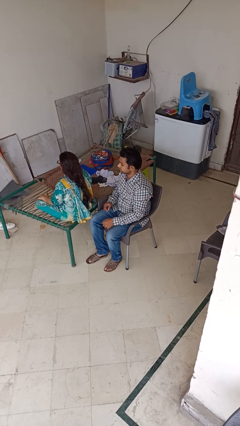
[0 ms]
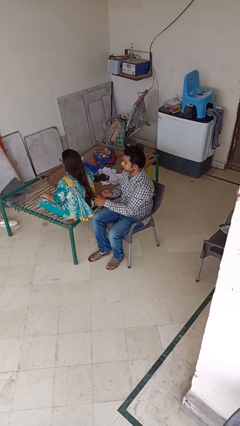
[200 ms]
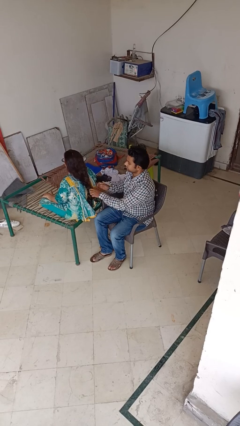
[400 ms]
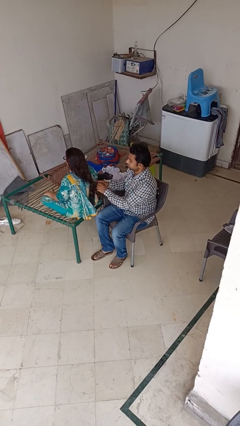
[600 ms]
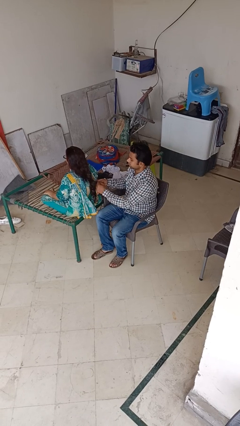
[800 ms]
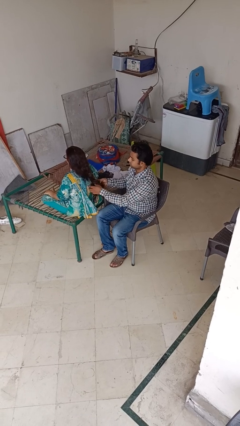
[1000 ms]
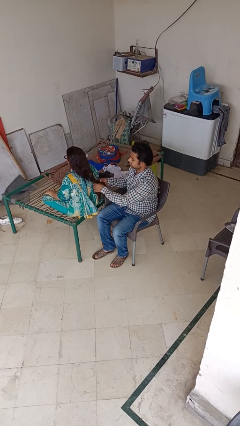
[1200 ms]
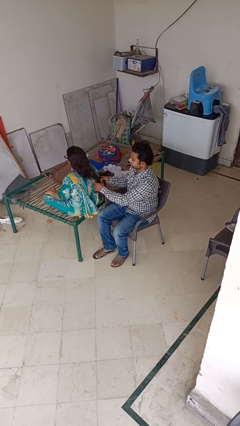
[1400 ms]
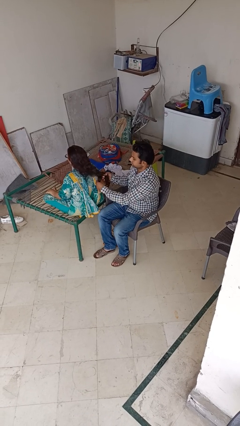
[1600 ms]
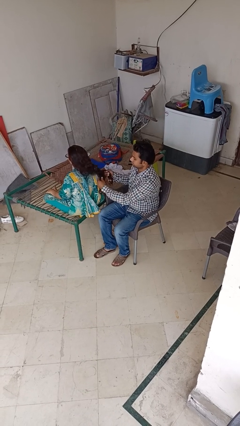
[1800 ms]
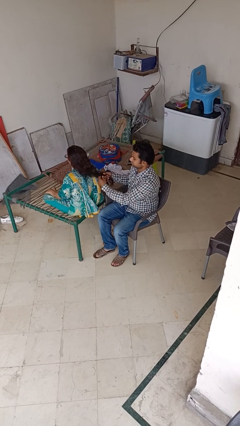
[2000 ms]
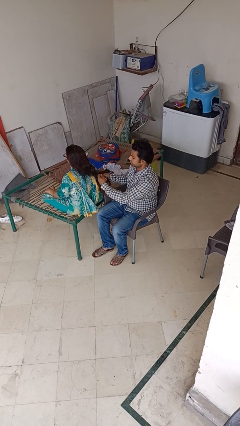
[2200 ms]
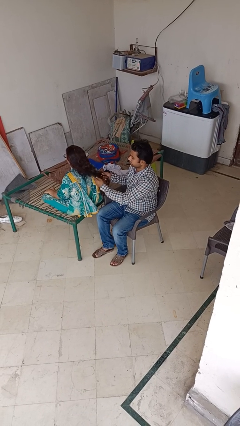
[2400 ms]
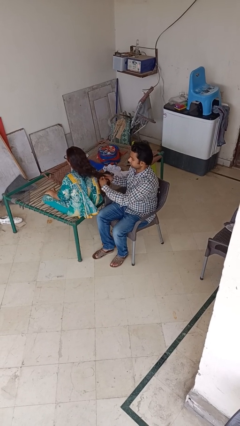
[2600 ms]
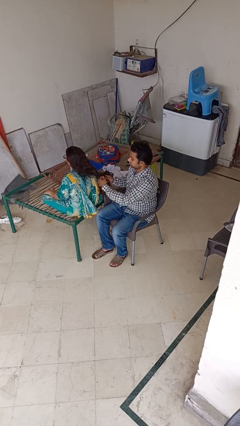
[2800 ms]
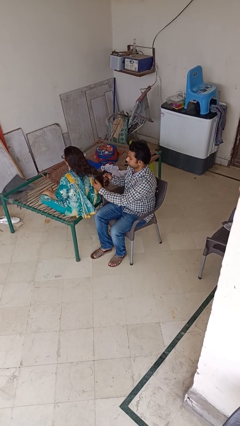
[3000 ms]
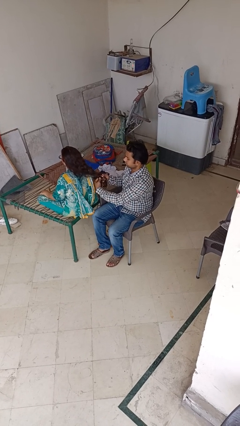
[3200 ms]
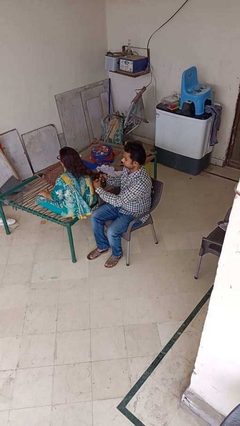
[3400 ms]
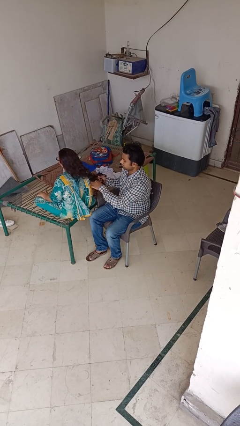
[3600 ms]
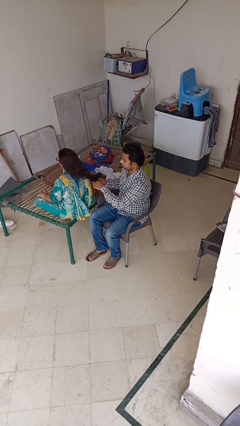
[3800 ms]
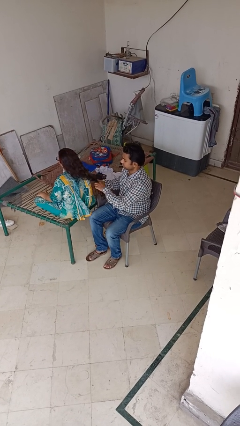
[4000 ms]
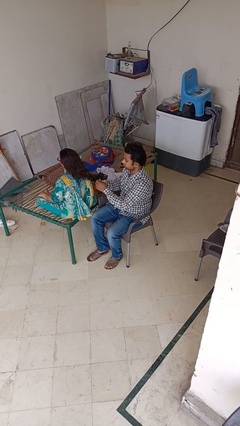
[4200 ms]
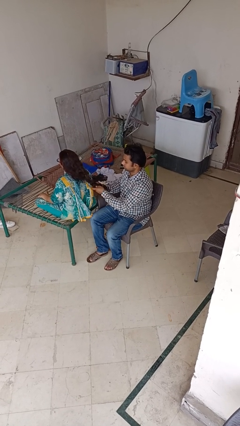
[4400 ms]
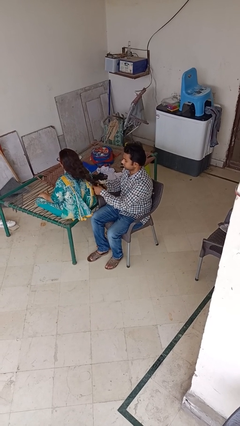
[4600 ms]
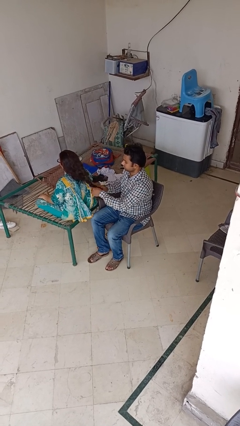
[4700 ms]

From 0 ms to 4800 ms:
person braids hair of person

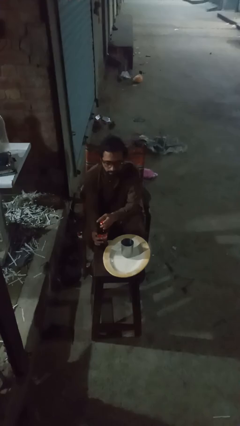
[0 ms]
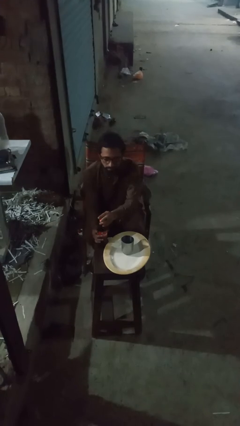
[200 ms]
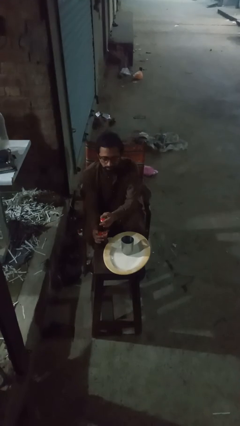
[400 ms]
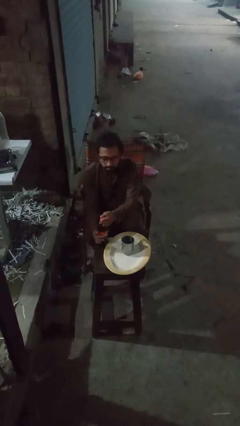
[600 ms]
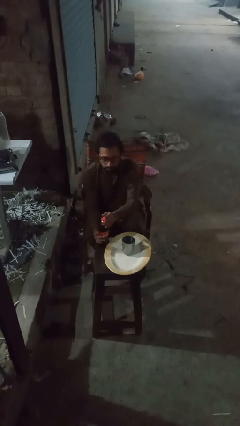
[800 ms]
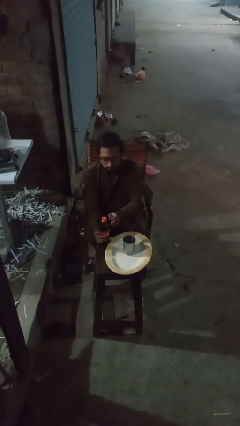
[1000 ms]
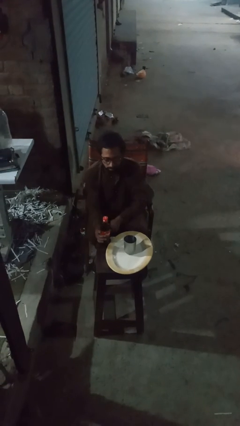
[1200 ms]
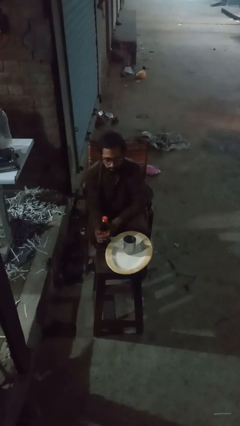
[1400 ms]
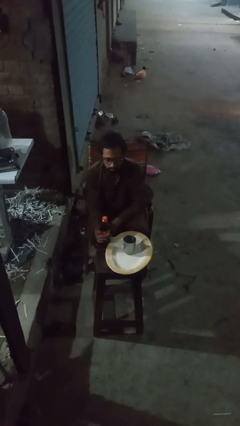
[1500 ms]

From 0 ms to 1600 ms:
person screws lid to bottle

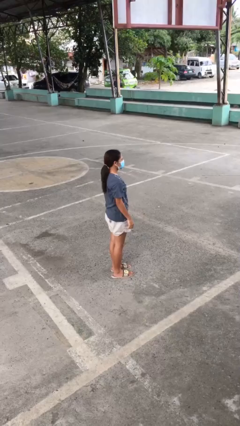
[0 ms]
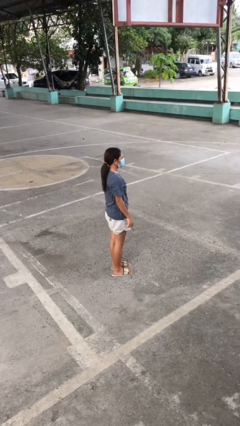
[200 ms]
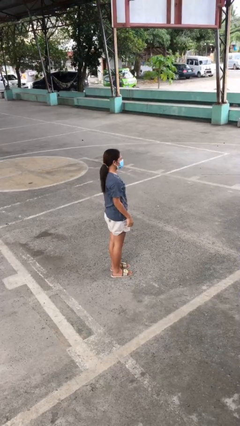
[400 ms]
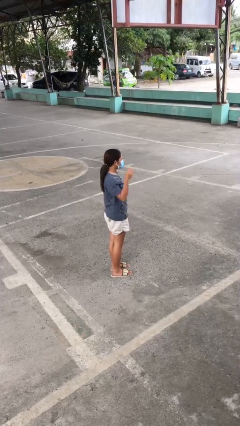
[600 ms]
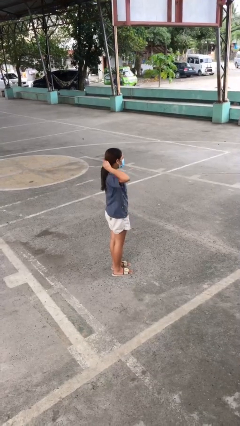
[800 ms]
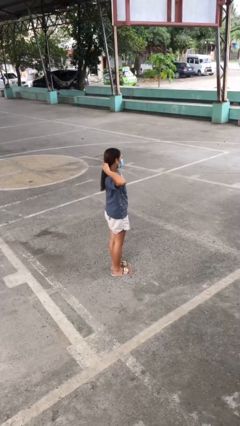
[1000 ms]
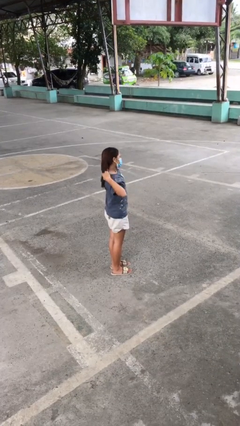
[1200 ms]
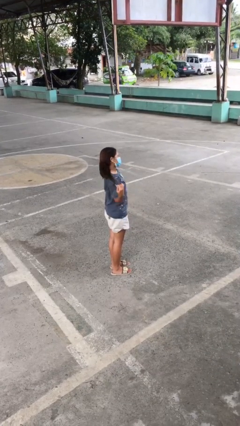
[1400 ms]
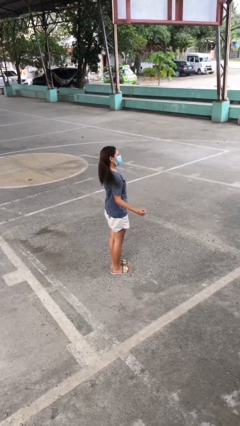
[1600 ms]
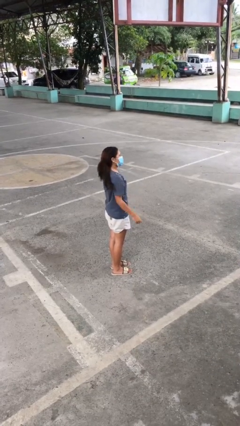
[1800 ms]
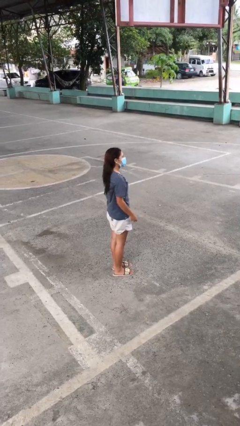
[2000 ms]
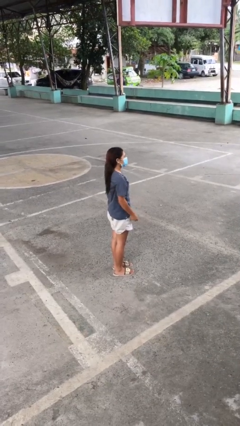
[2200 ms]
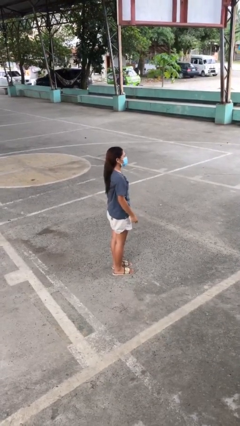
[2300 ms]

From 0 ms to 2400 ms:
person takes off hairtie

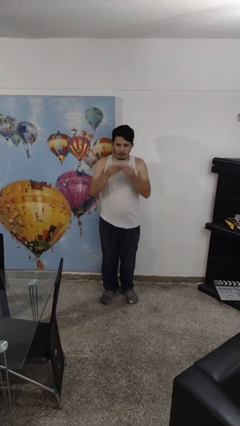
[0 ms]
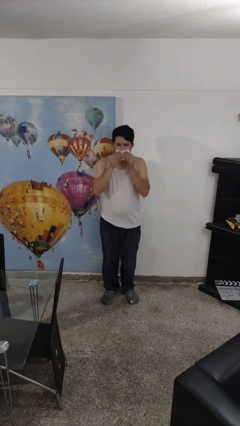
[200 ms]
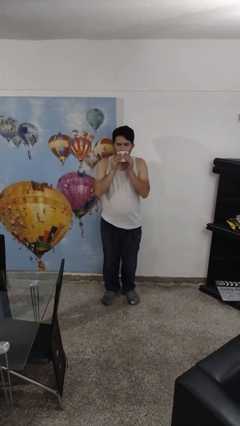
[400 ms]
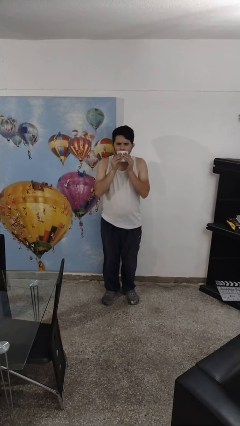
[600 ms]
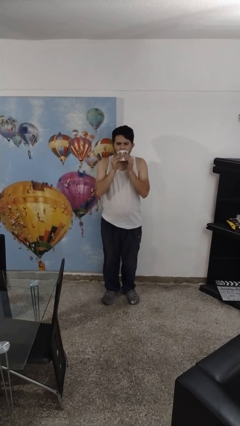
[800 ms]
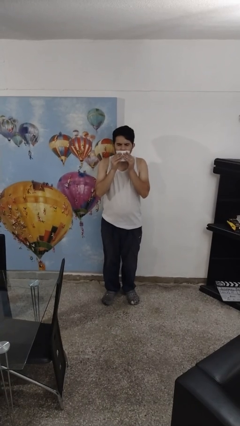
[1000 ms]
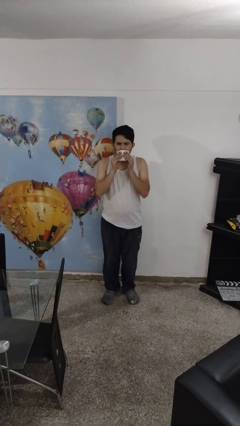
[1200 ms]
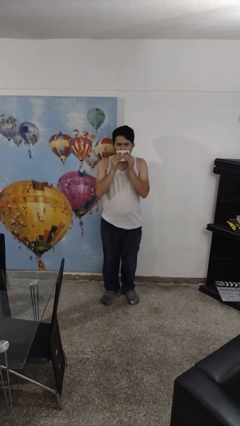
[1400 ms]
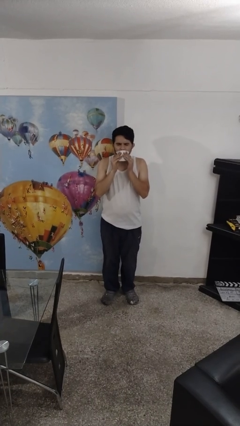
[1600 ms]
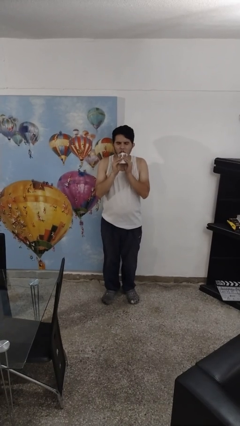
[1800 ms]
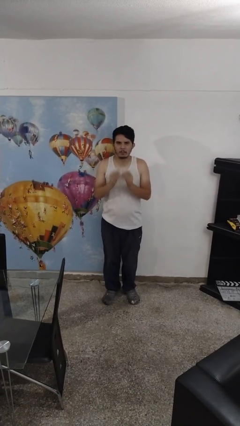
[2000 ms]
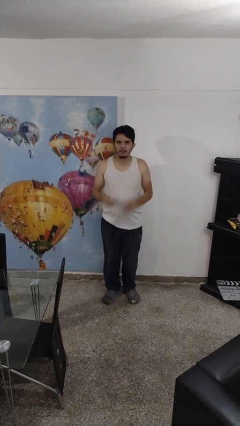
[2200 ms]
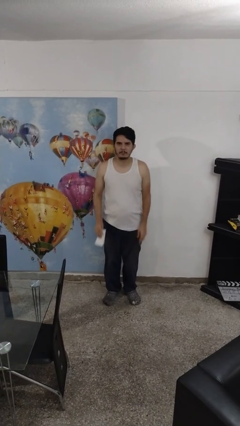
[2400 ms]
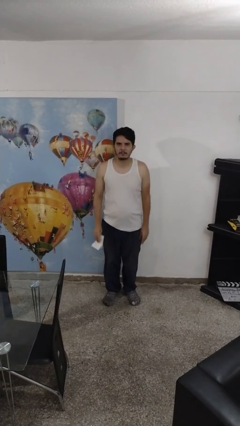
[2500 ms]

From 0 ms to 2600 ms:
person wipes mouth with napkin

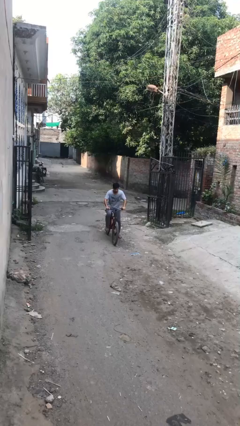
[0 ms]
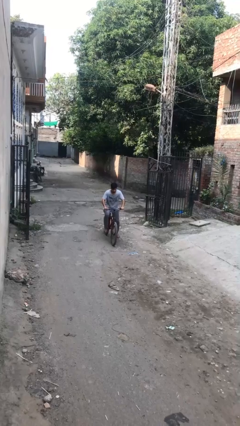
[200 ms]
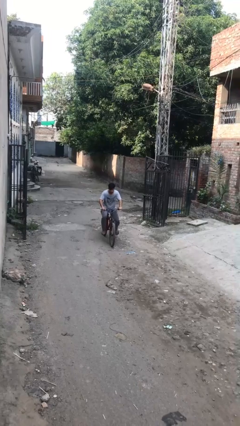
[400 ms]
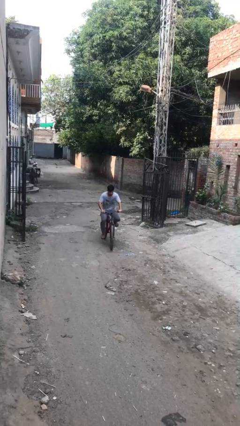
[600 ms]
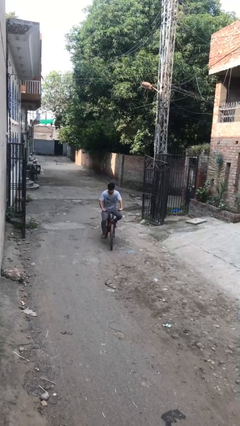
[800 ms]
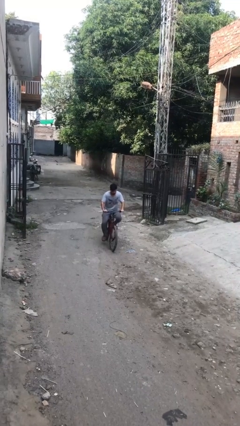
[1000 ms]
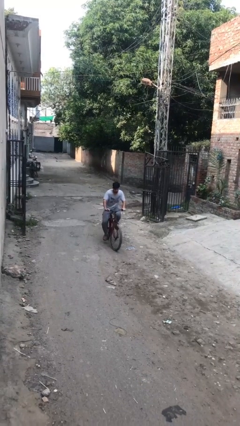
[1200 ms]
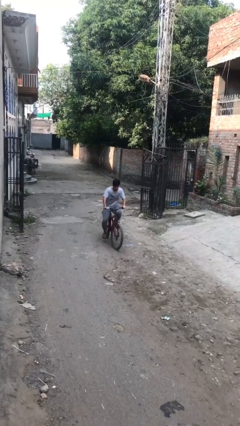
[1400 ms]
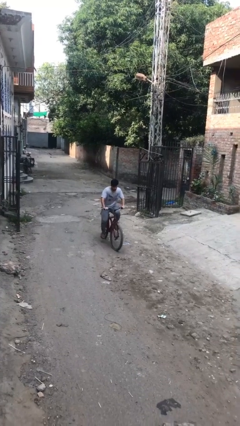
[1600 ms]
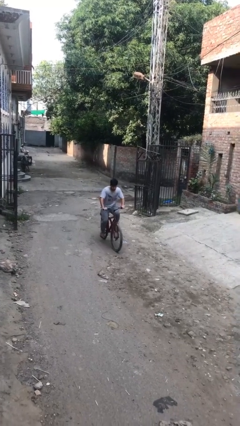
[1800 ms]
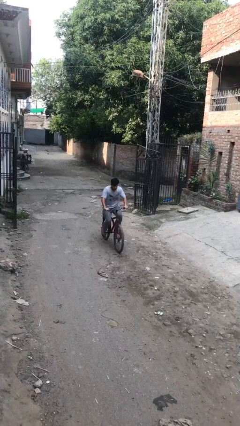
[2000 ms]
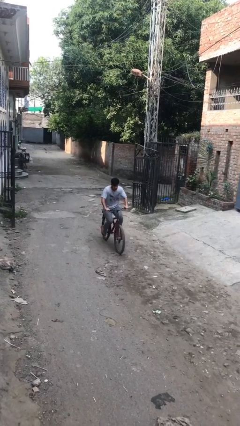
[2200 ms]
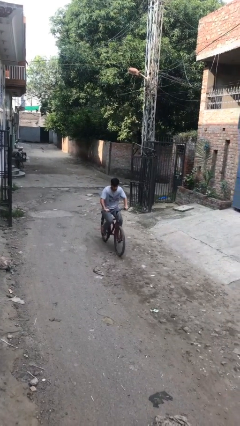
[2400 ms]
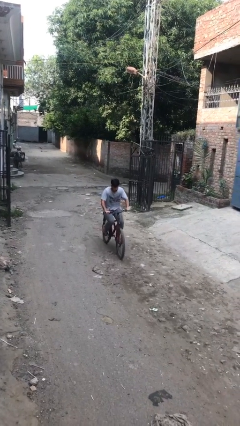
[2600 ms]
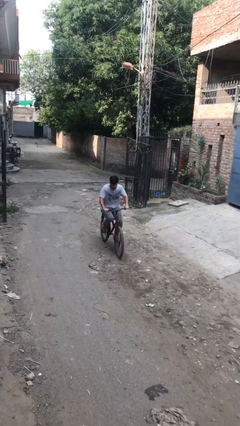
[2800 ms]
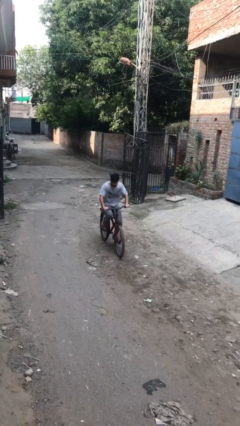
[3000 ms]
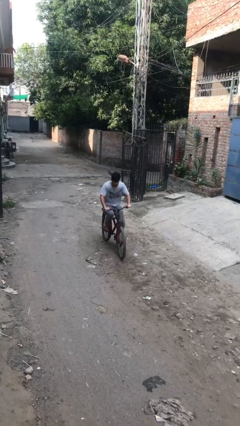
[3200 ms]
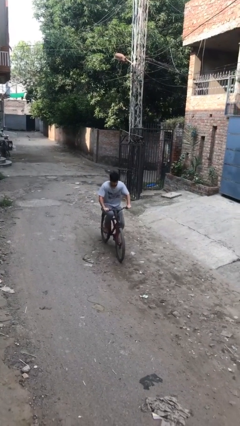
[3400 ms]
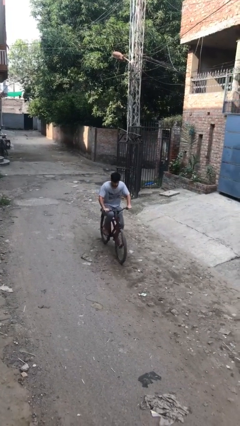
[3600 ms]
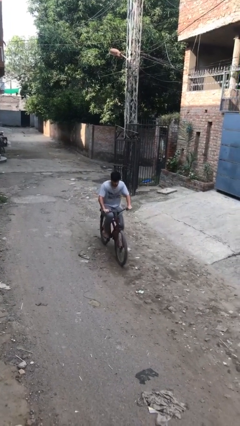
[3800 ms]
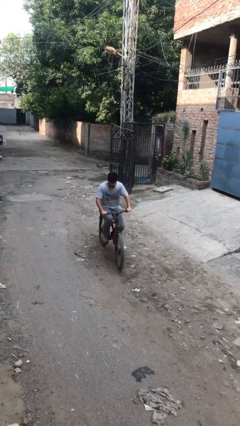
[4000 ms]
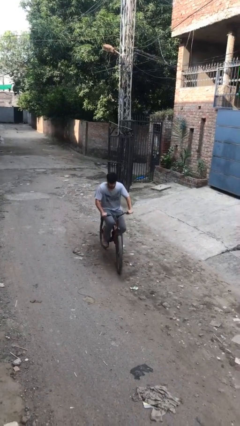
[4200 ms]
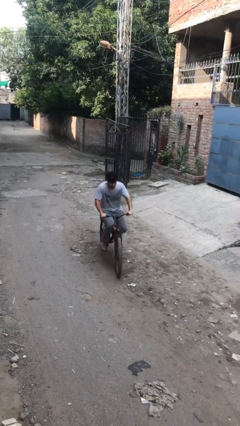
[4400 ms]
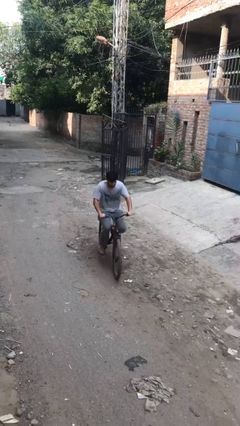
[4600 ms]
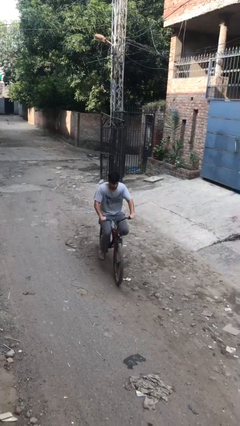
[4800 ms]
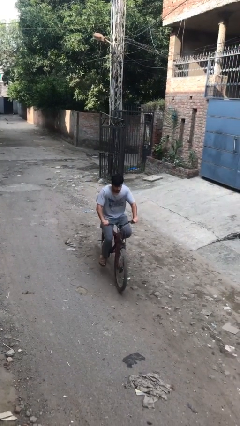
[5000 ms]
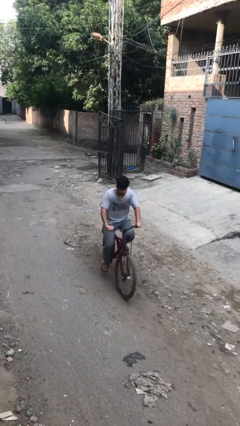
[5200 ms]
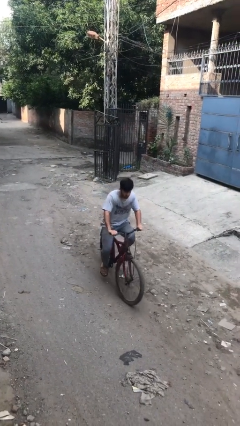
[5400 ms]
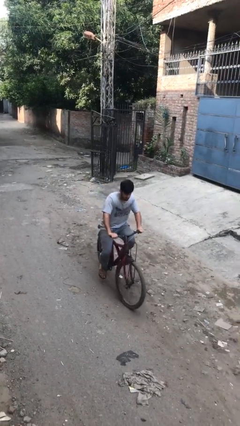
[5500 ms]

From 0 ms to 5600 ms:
person rides bicycle

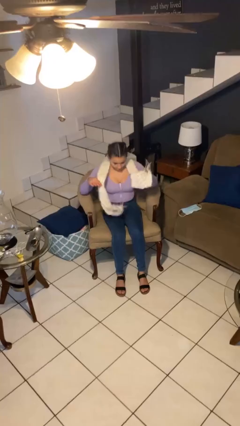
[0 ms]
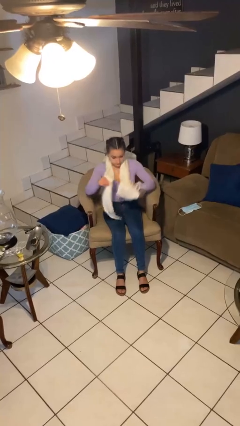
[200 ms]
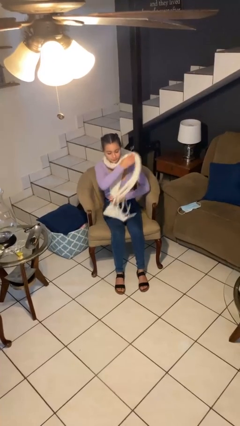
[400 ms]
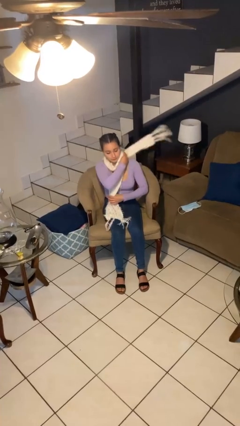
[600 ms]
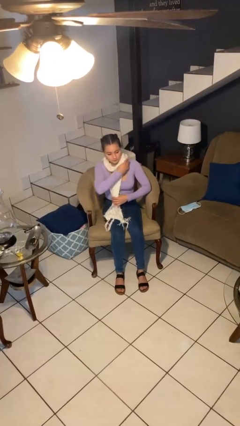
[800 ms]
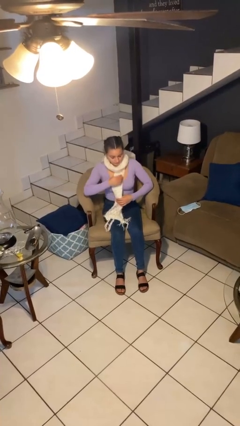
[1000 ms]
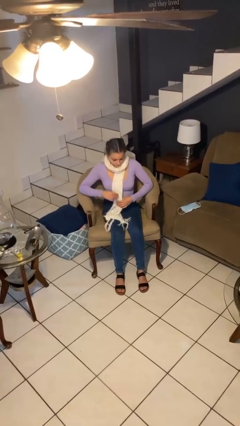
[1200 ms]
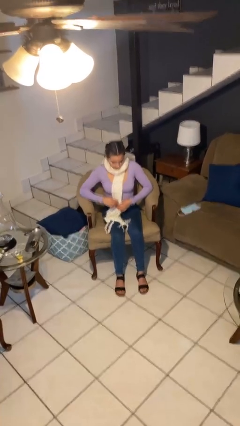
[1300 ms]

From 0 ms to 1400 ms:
person puts on scarf
